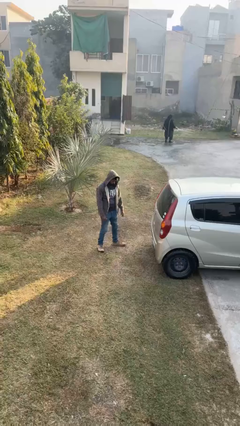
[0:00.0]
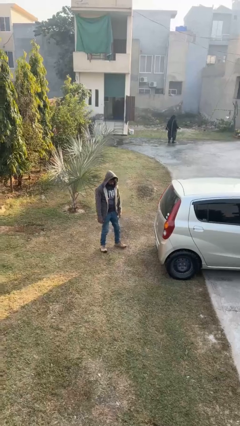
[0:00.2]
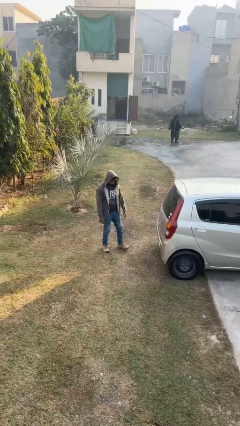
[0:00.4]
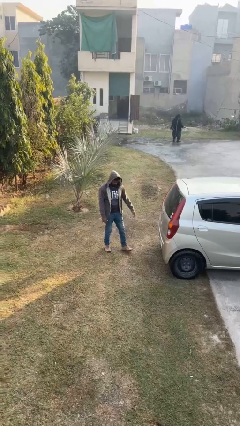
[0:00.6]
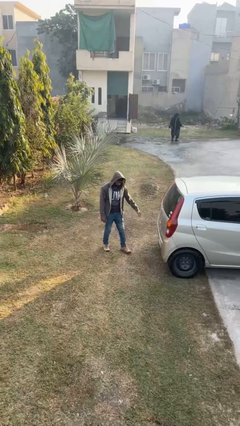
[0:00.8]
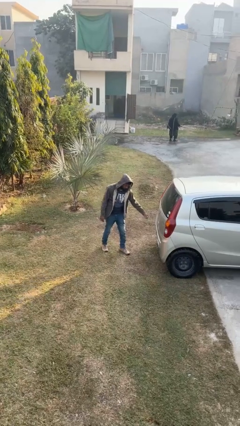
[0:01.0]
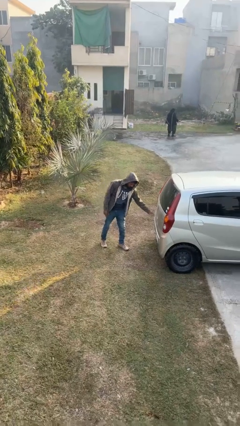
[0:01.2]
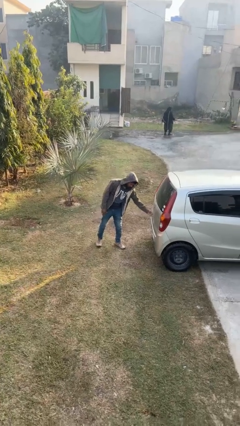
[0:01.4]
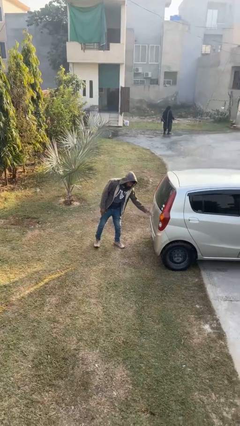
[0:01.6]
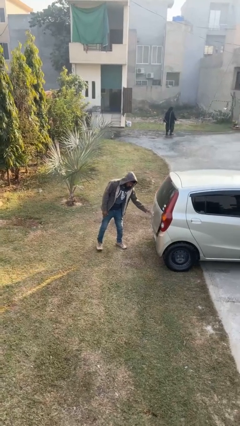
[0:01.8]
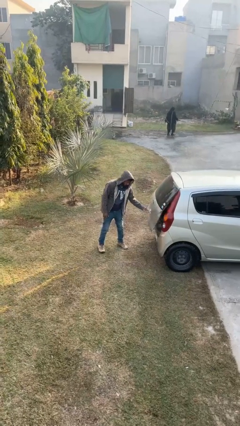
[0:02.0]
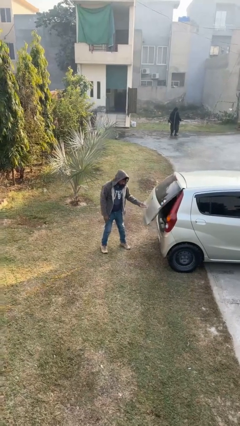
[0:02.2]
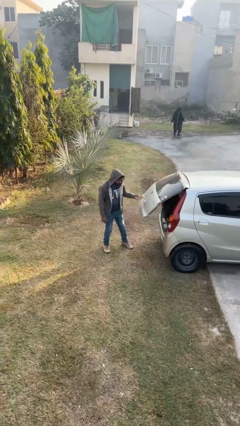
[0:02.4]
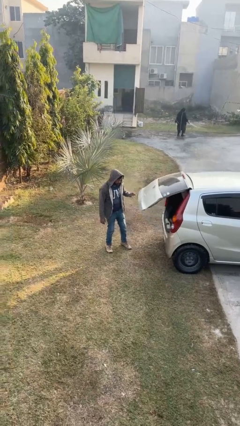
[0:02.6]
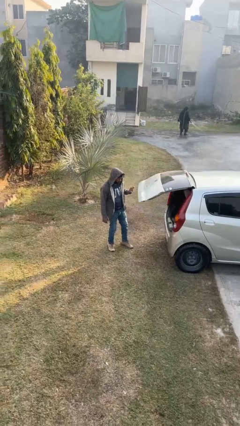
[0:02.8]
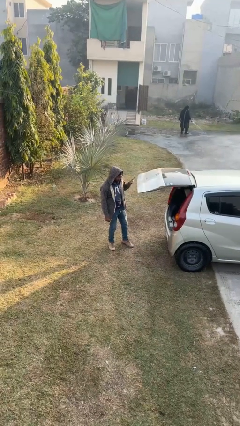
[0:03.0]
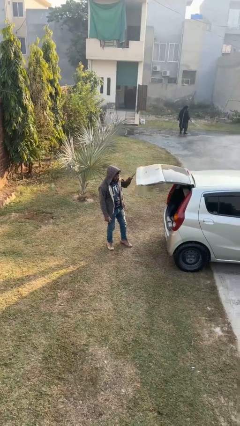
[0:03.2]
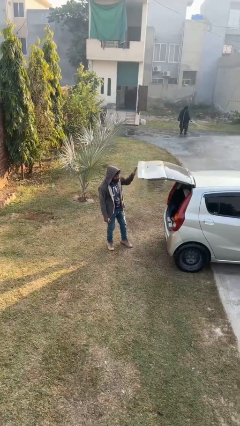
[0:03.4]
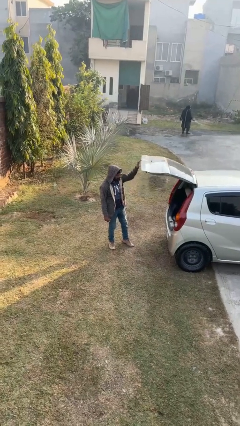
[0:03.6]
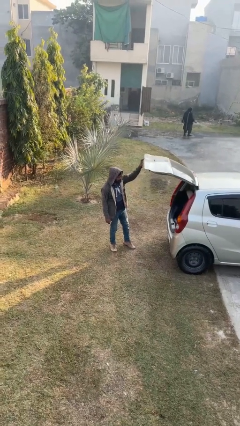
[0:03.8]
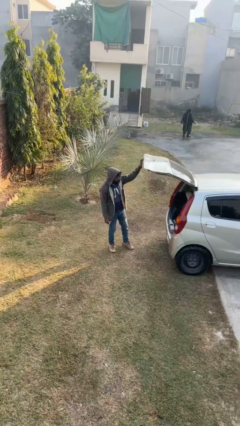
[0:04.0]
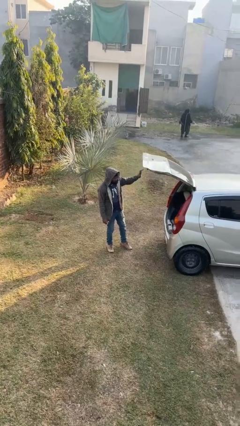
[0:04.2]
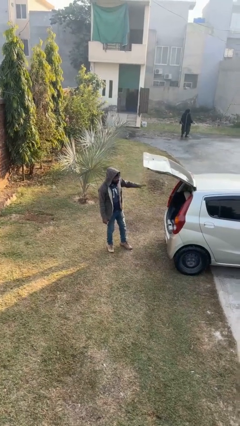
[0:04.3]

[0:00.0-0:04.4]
person opens car trunk

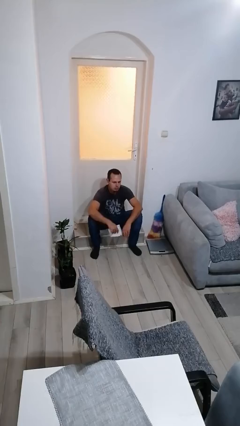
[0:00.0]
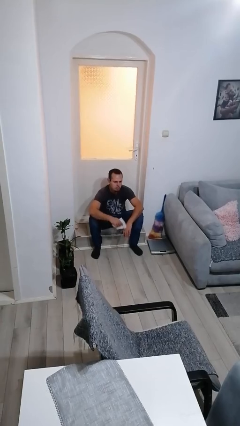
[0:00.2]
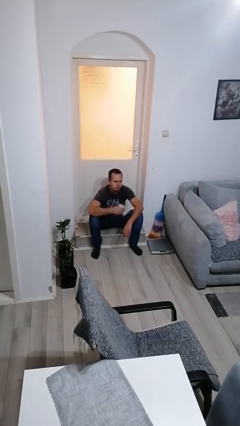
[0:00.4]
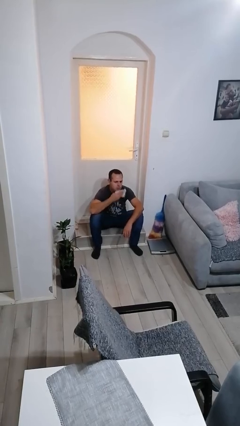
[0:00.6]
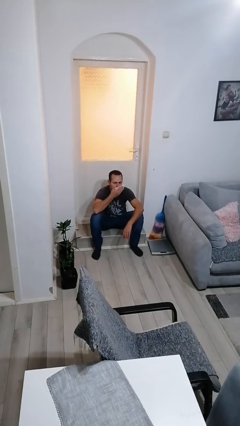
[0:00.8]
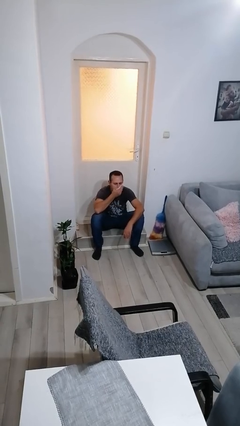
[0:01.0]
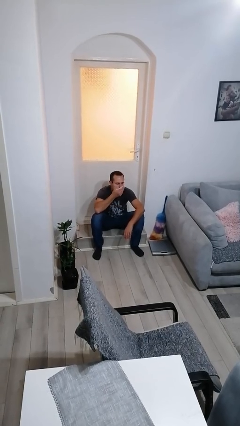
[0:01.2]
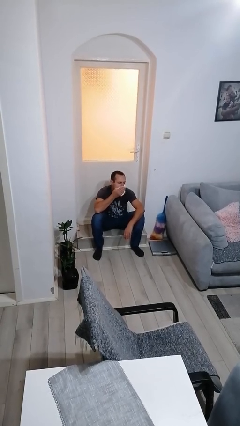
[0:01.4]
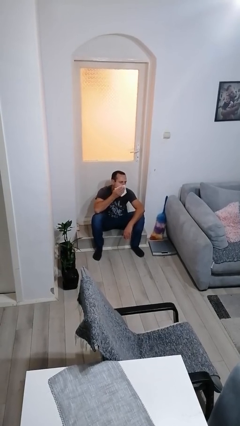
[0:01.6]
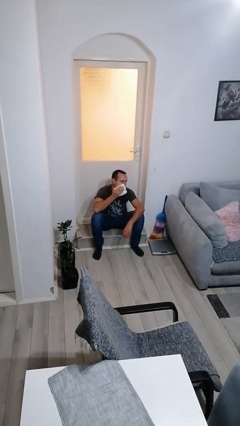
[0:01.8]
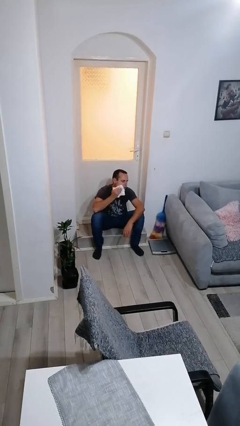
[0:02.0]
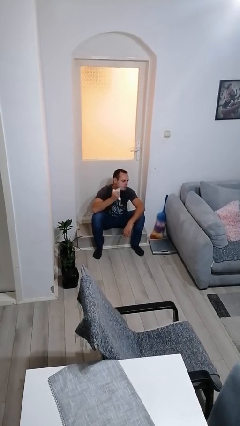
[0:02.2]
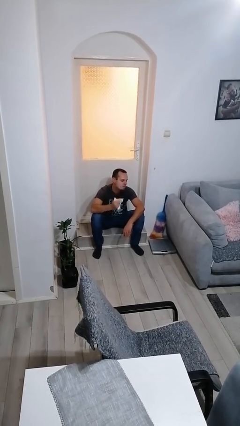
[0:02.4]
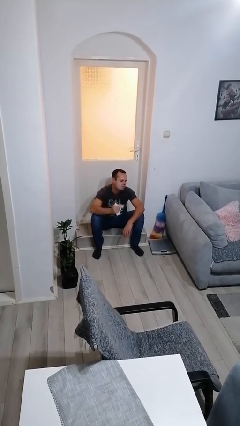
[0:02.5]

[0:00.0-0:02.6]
person wipes mouth with napkin

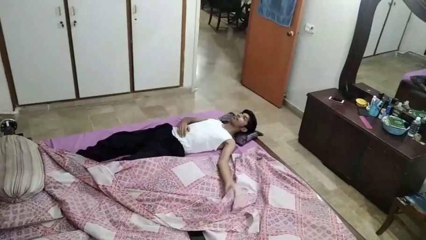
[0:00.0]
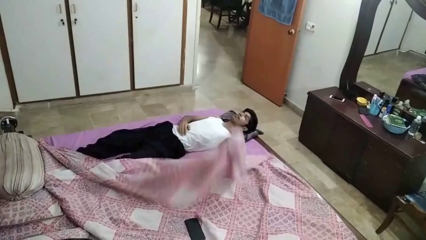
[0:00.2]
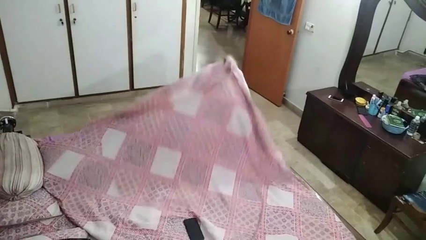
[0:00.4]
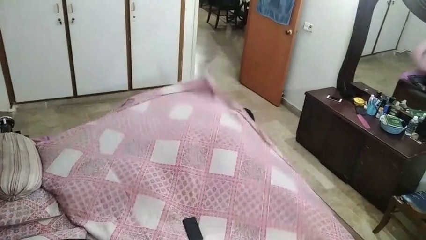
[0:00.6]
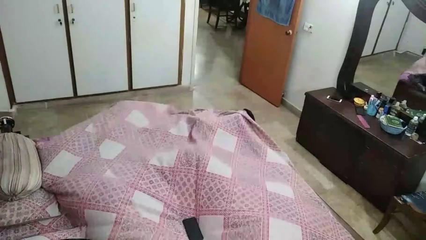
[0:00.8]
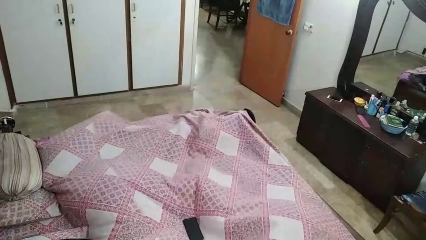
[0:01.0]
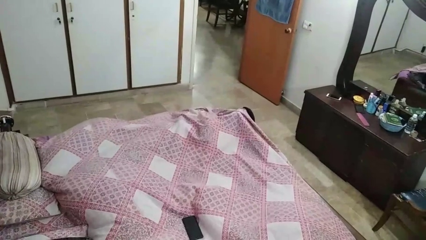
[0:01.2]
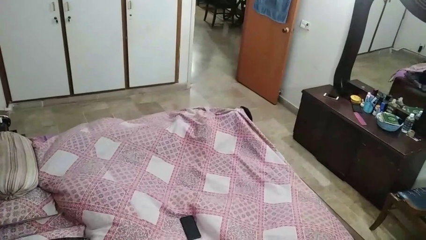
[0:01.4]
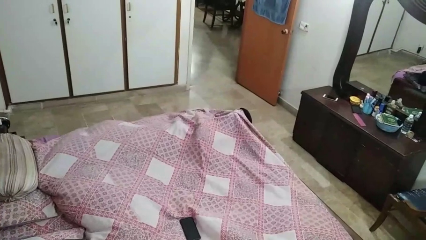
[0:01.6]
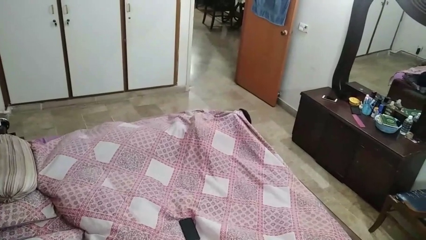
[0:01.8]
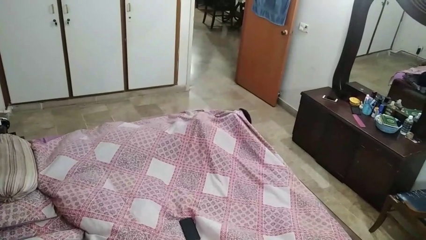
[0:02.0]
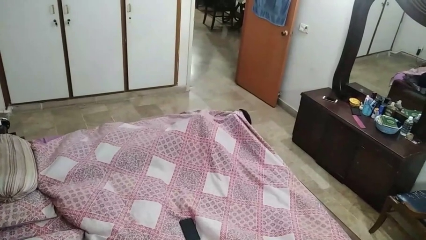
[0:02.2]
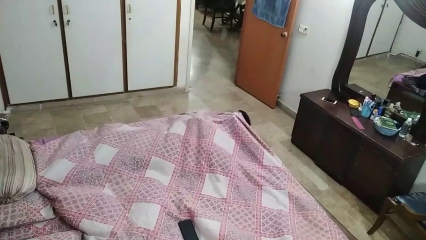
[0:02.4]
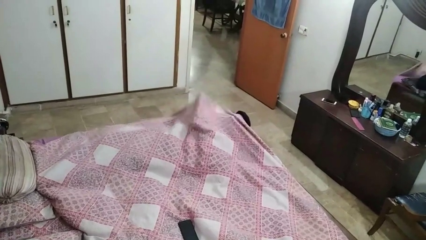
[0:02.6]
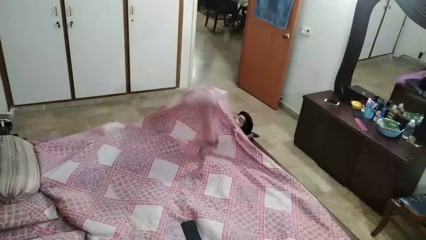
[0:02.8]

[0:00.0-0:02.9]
person covers with bedsheets

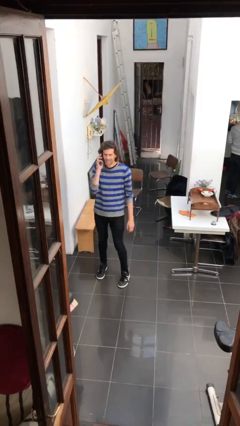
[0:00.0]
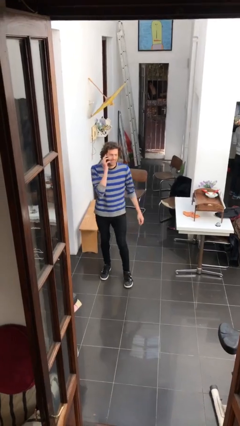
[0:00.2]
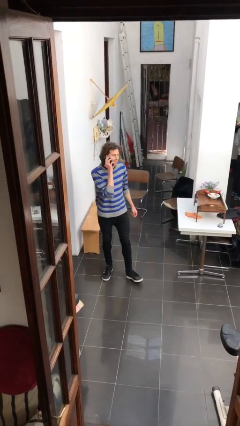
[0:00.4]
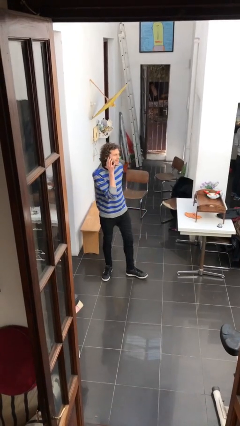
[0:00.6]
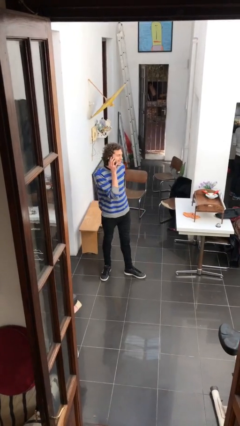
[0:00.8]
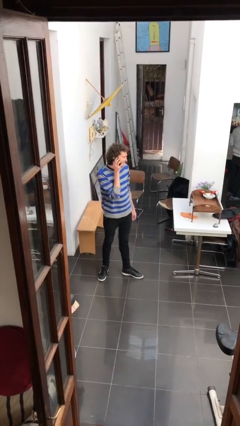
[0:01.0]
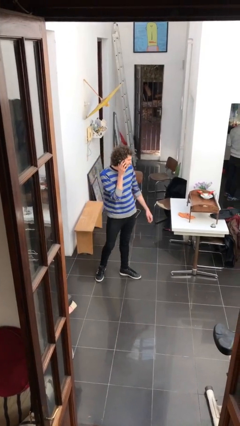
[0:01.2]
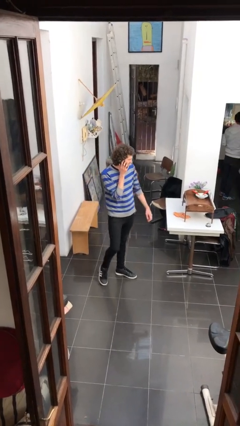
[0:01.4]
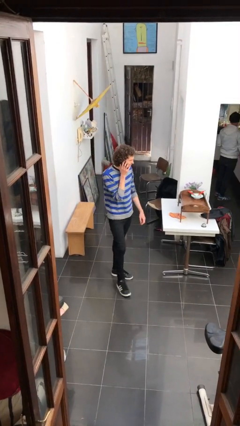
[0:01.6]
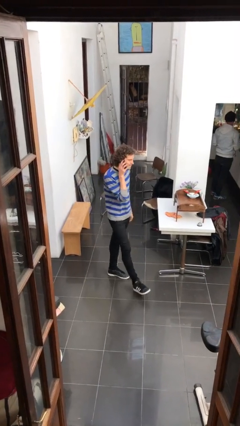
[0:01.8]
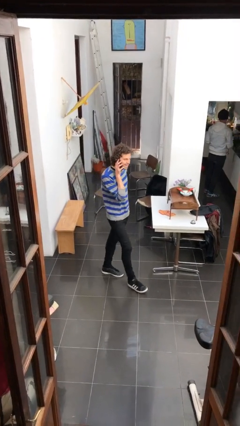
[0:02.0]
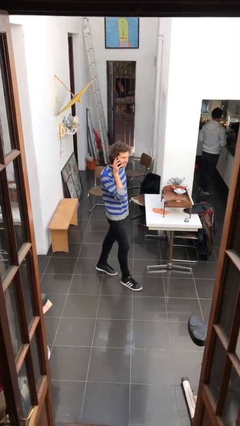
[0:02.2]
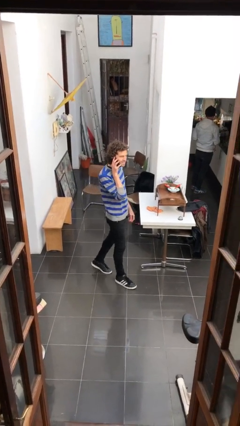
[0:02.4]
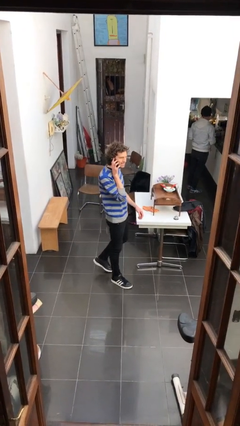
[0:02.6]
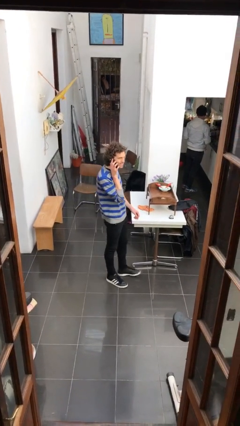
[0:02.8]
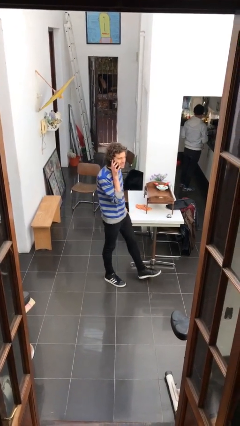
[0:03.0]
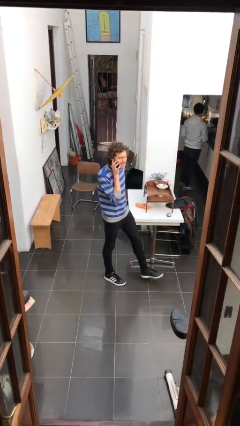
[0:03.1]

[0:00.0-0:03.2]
person talks on phone

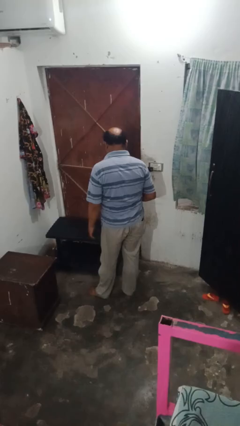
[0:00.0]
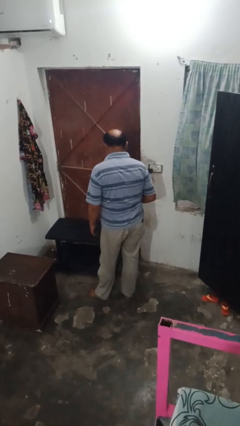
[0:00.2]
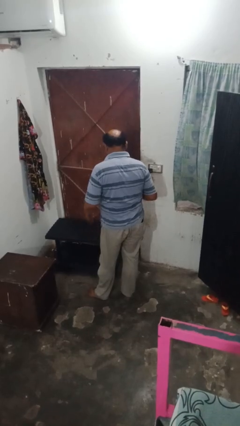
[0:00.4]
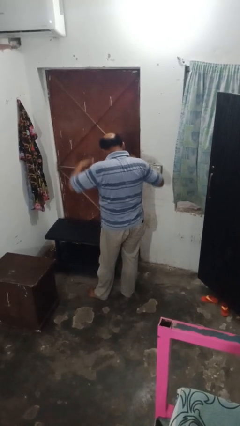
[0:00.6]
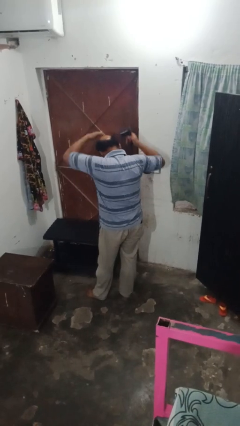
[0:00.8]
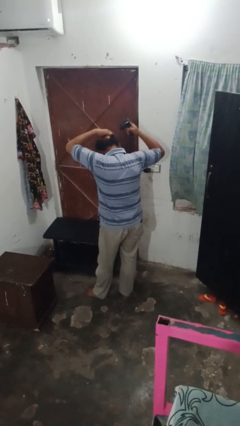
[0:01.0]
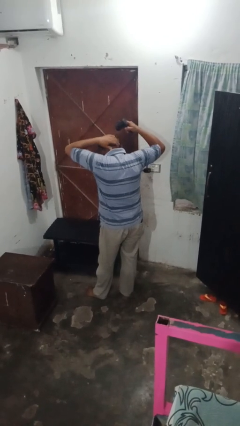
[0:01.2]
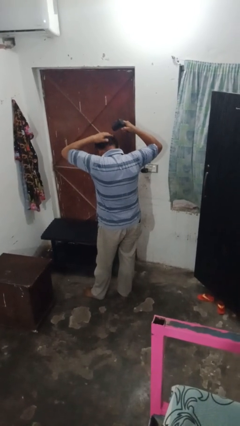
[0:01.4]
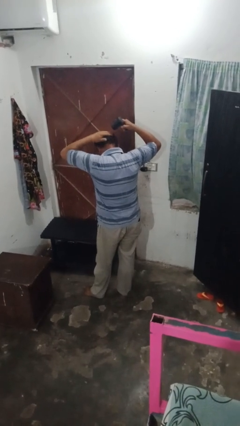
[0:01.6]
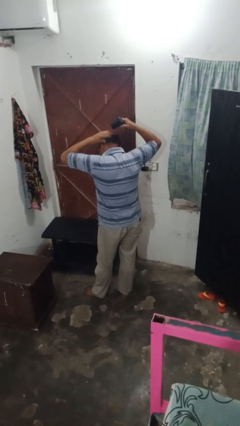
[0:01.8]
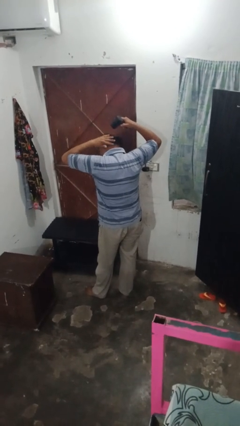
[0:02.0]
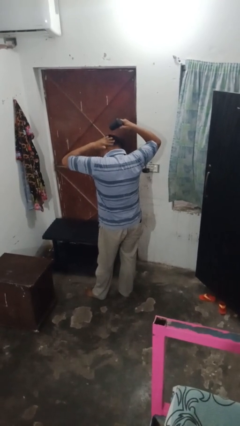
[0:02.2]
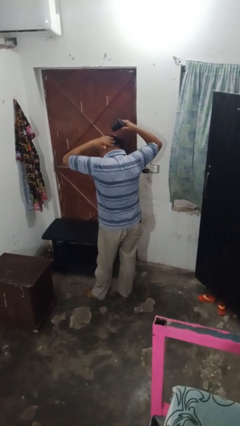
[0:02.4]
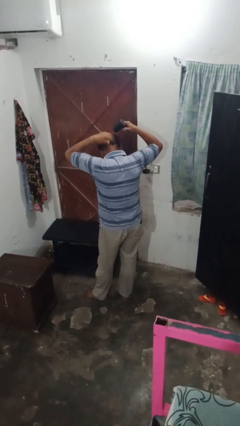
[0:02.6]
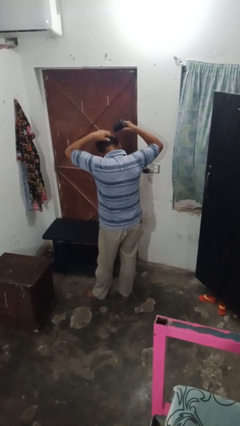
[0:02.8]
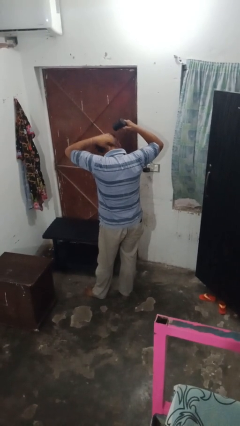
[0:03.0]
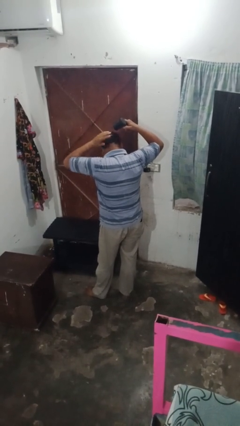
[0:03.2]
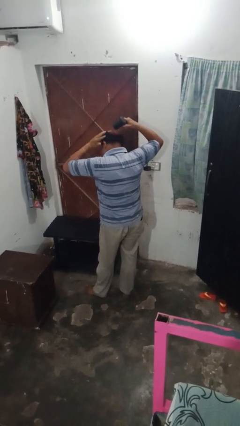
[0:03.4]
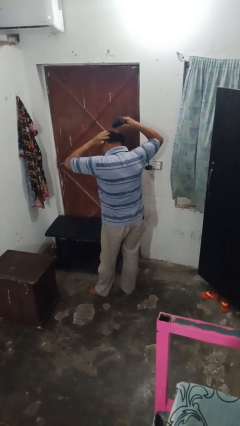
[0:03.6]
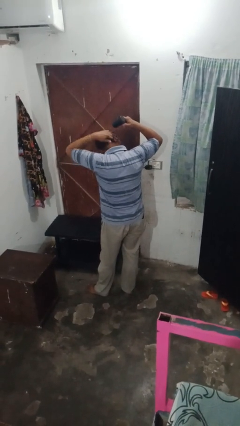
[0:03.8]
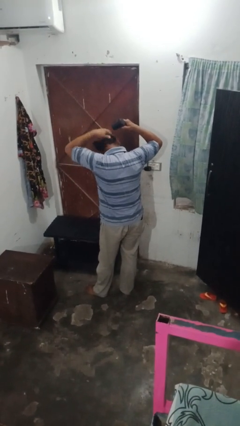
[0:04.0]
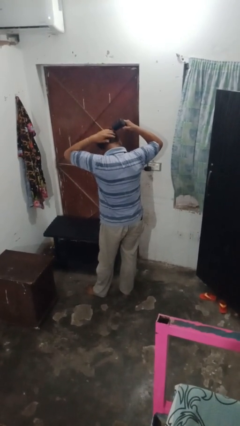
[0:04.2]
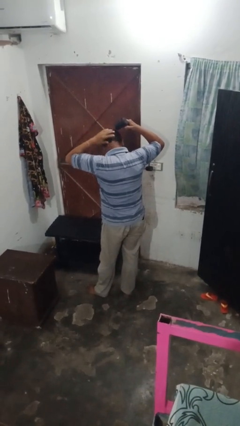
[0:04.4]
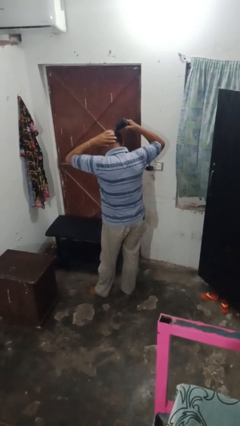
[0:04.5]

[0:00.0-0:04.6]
person dries hair with hairdryer

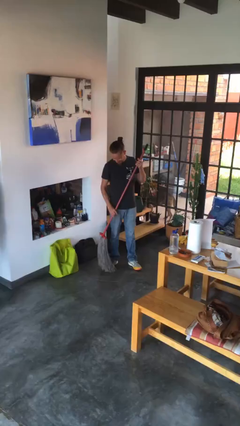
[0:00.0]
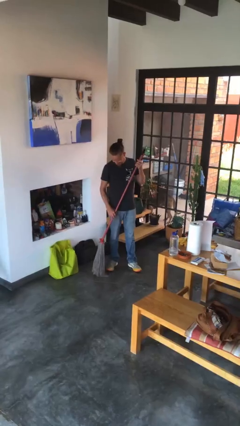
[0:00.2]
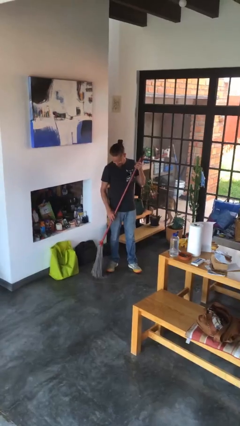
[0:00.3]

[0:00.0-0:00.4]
person mops
